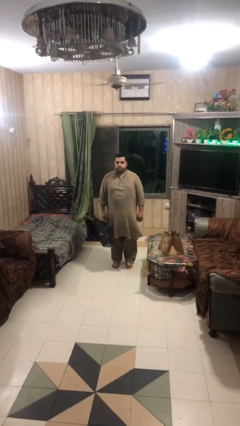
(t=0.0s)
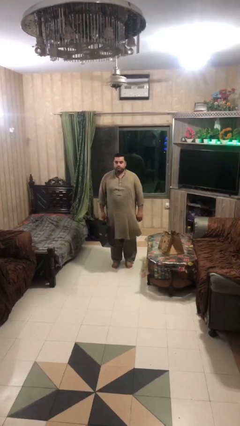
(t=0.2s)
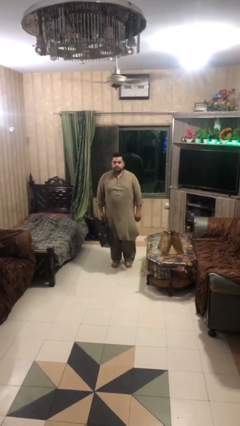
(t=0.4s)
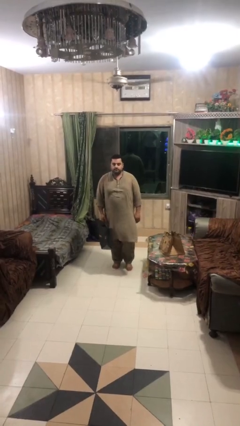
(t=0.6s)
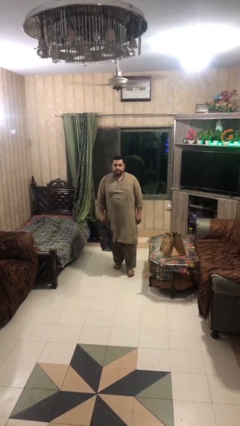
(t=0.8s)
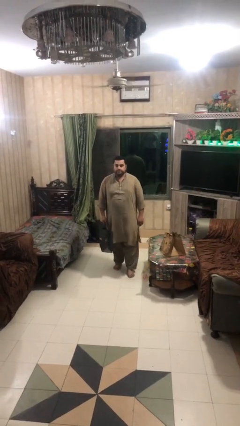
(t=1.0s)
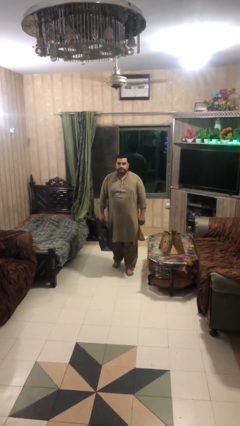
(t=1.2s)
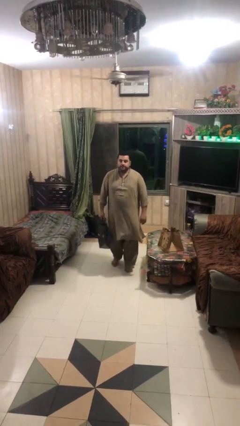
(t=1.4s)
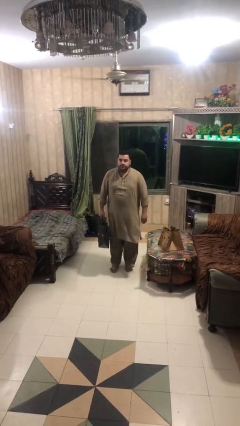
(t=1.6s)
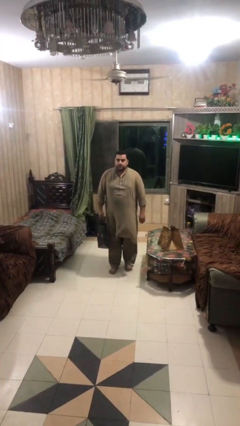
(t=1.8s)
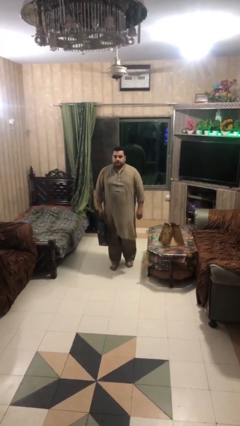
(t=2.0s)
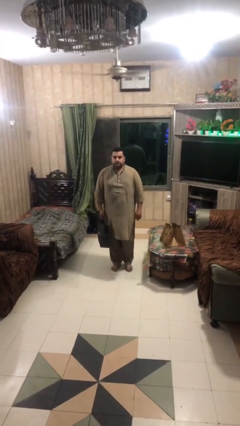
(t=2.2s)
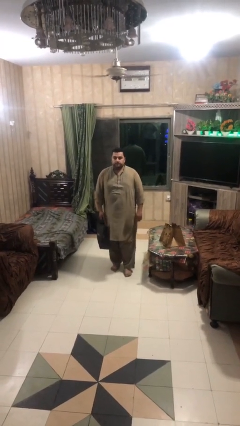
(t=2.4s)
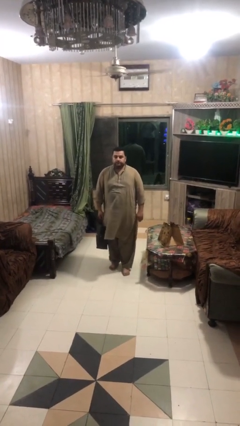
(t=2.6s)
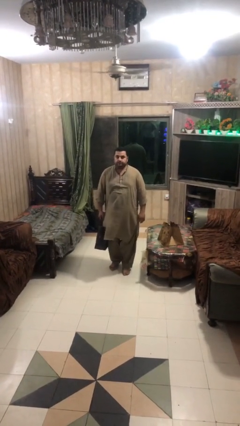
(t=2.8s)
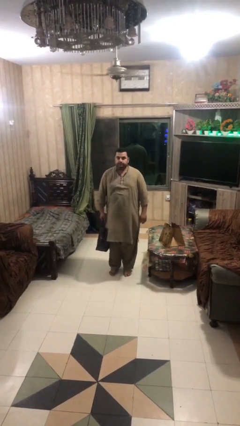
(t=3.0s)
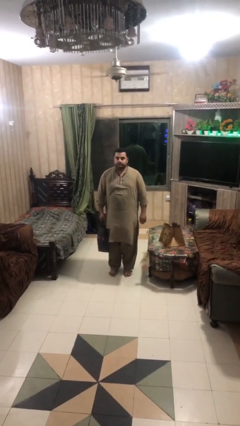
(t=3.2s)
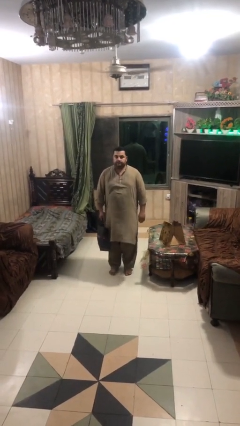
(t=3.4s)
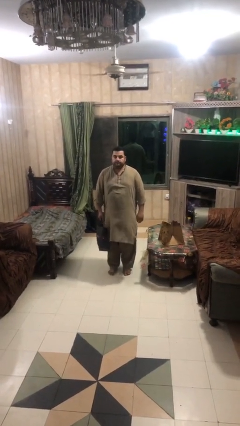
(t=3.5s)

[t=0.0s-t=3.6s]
person carries groceries

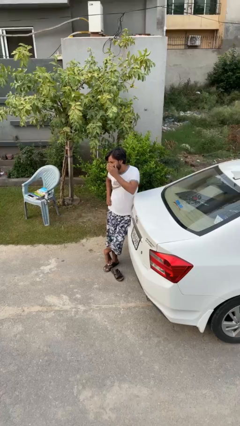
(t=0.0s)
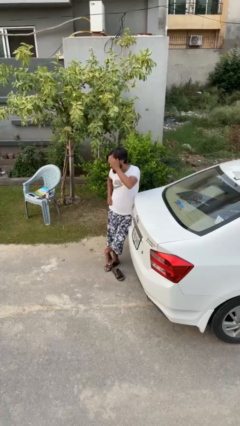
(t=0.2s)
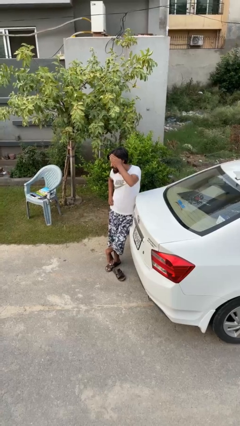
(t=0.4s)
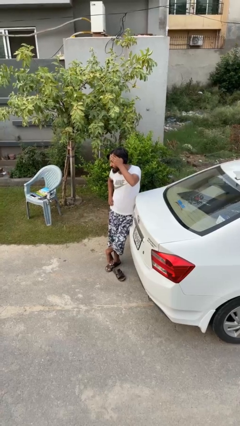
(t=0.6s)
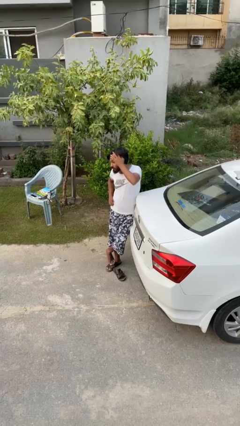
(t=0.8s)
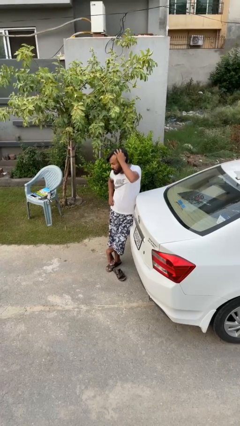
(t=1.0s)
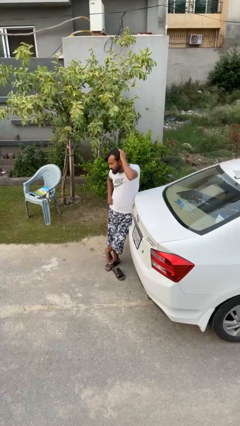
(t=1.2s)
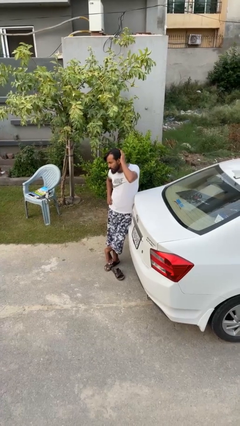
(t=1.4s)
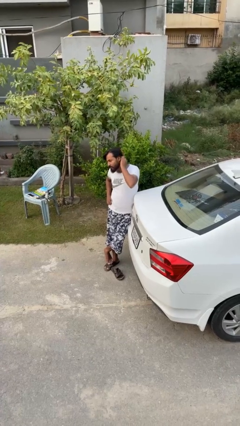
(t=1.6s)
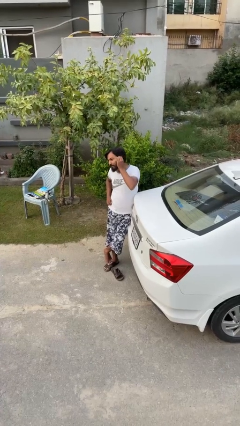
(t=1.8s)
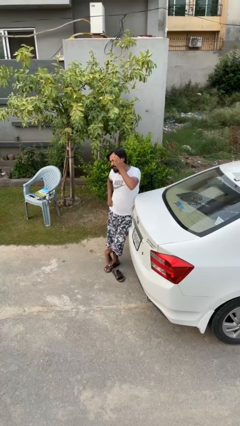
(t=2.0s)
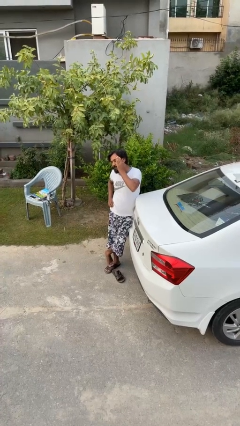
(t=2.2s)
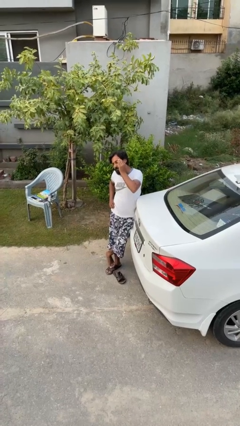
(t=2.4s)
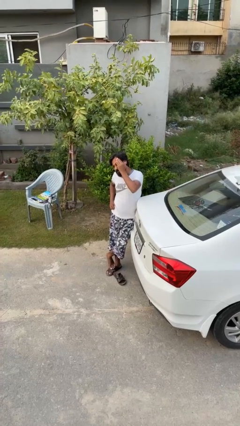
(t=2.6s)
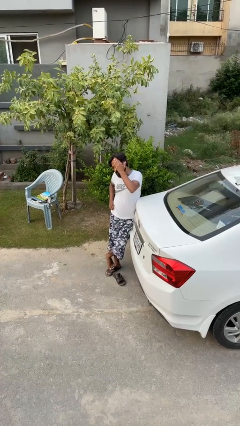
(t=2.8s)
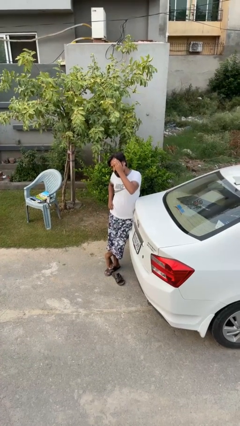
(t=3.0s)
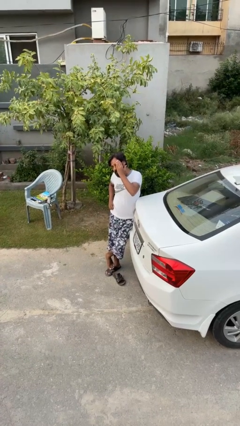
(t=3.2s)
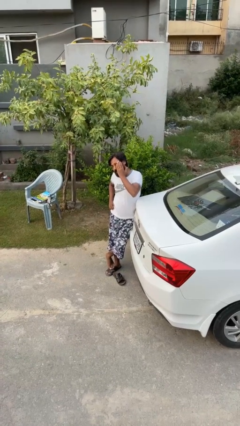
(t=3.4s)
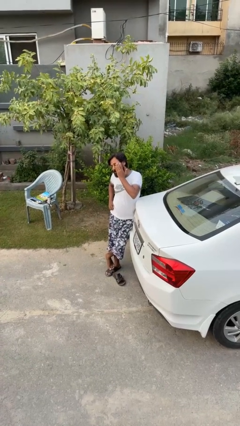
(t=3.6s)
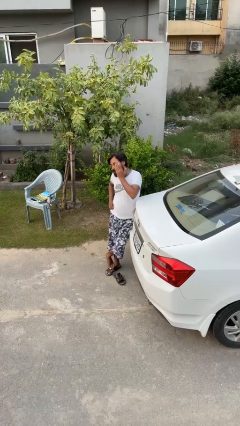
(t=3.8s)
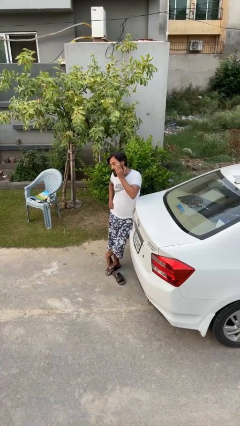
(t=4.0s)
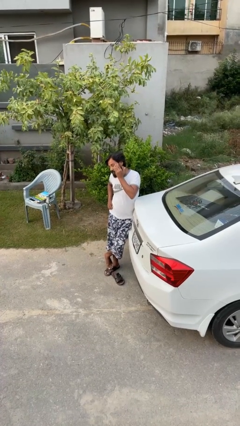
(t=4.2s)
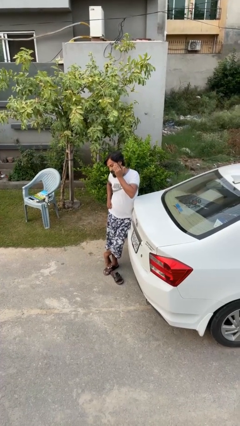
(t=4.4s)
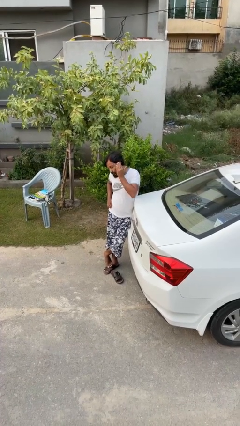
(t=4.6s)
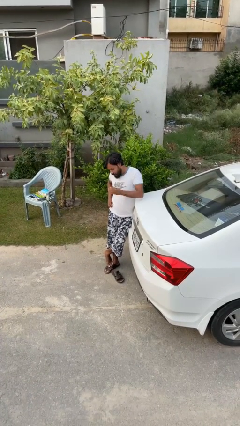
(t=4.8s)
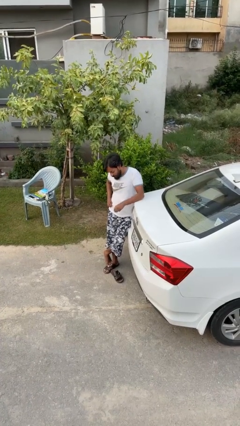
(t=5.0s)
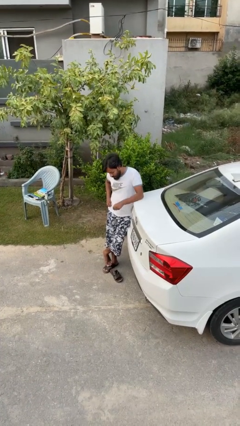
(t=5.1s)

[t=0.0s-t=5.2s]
person scratches face

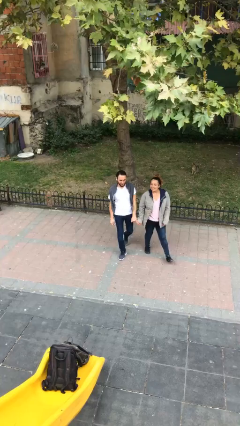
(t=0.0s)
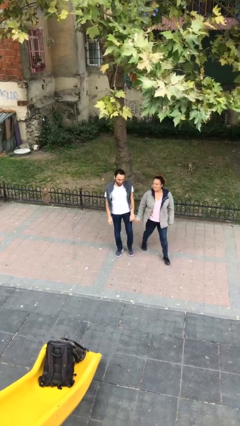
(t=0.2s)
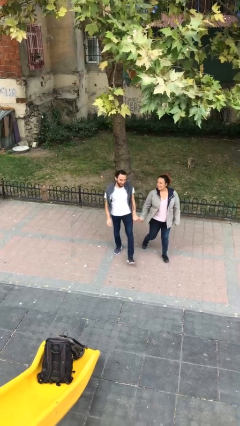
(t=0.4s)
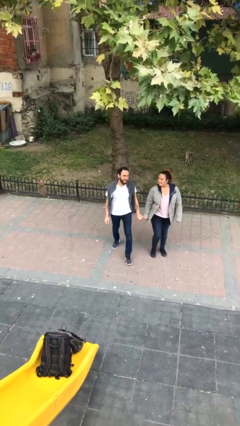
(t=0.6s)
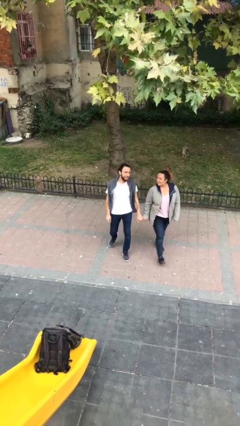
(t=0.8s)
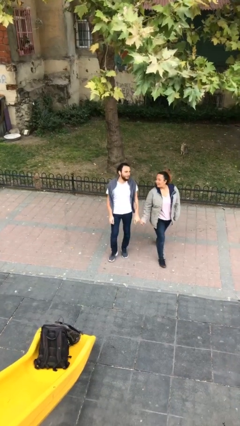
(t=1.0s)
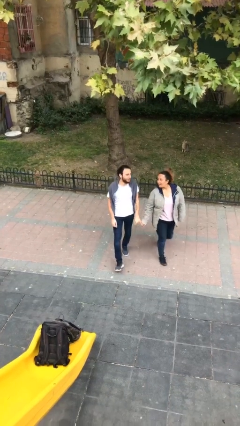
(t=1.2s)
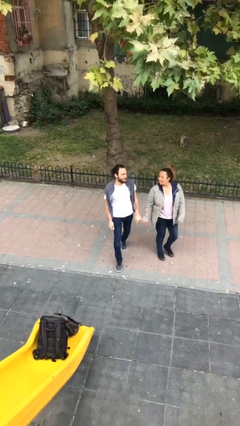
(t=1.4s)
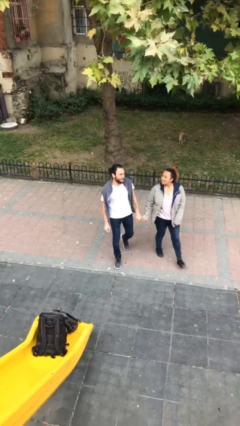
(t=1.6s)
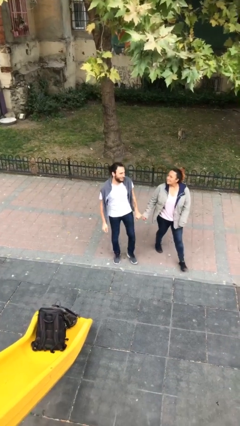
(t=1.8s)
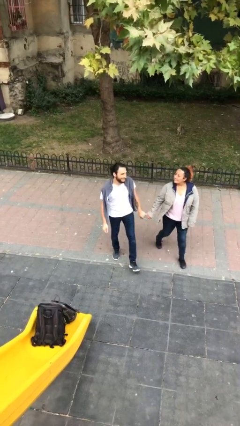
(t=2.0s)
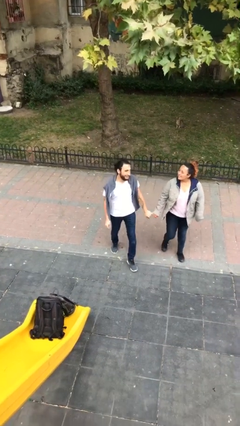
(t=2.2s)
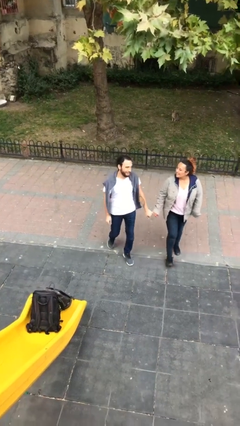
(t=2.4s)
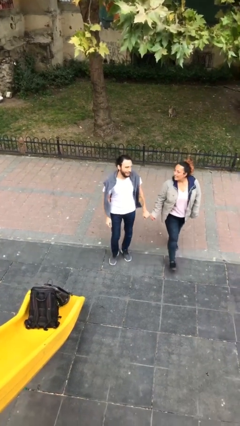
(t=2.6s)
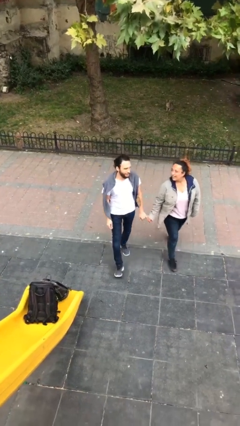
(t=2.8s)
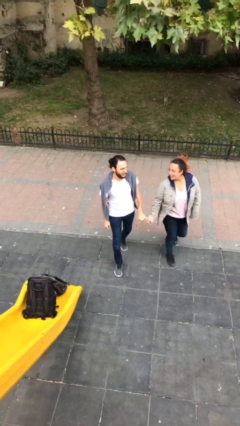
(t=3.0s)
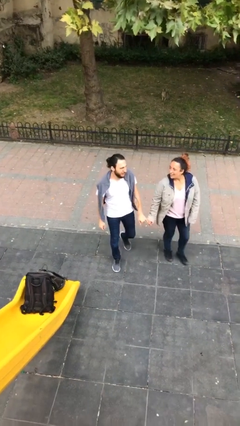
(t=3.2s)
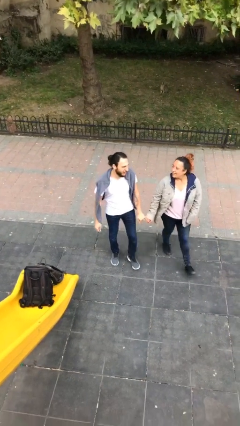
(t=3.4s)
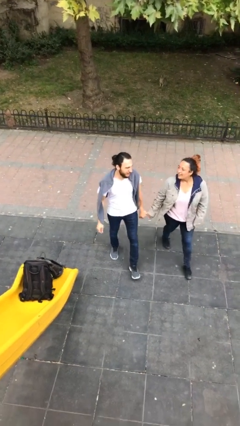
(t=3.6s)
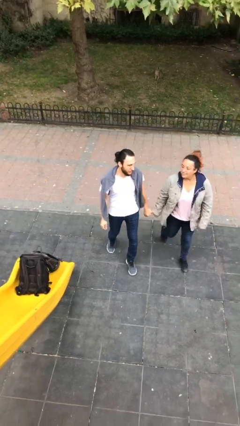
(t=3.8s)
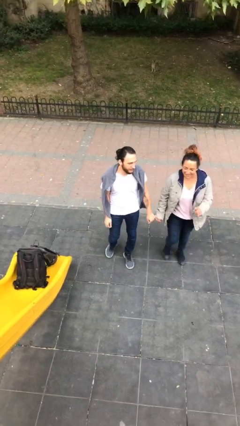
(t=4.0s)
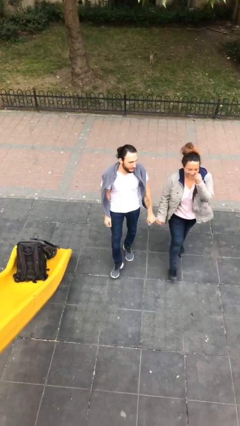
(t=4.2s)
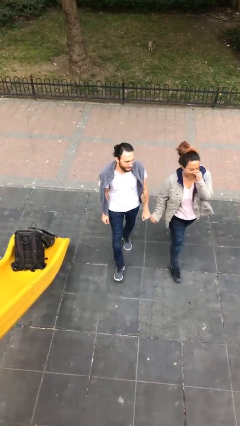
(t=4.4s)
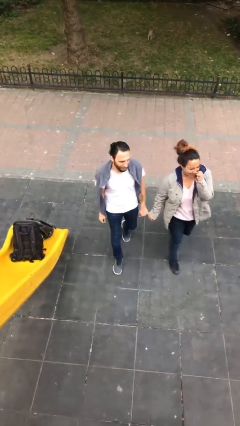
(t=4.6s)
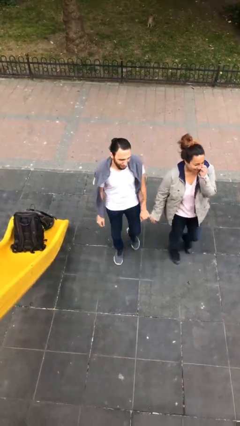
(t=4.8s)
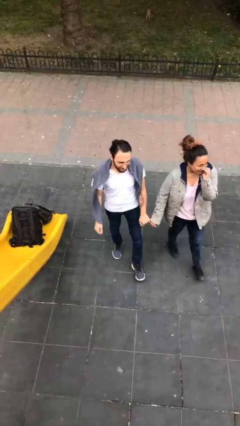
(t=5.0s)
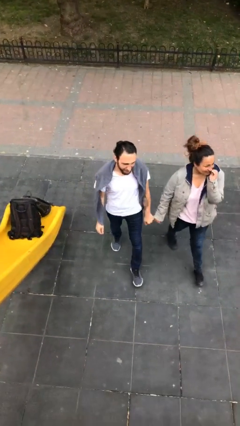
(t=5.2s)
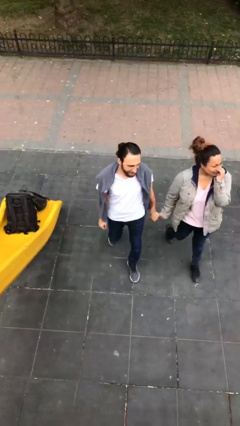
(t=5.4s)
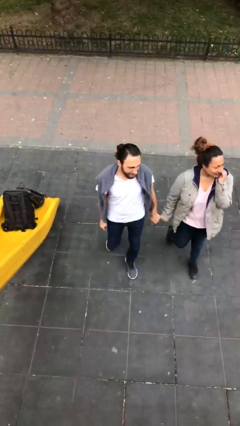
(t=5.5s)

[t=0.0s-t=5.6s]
person holds hand

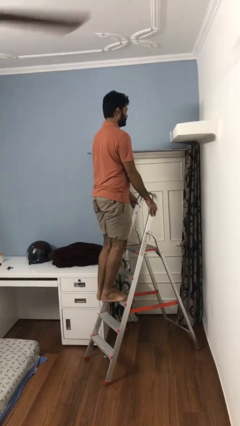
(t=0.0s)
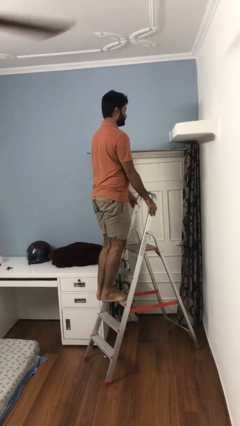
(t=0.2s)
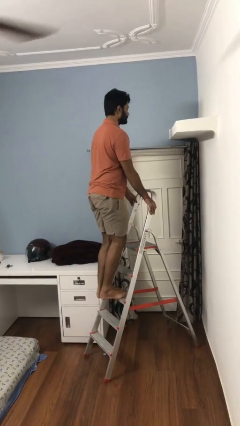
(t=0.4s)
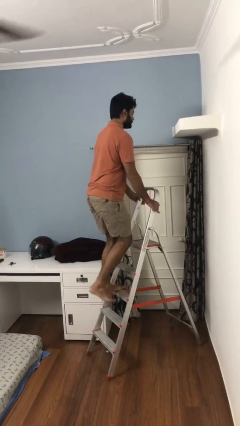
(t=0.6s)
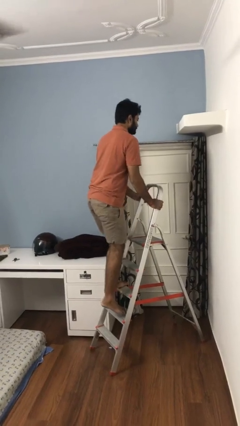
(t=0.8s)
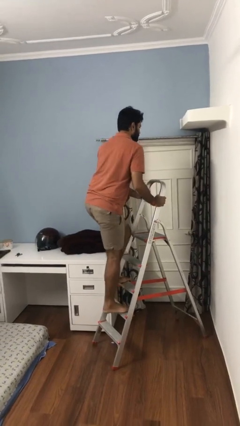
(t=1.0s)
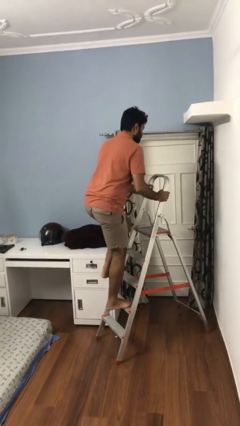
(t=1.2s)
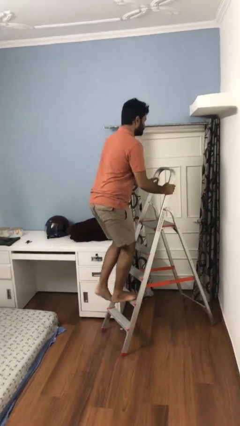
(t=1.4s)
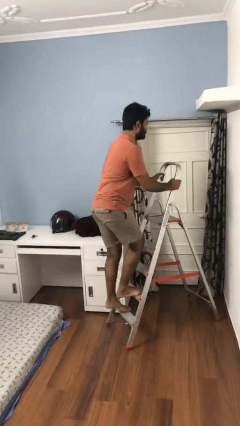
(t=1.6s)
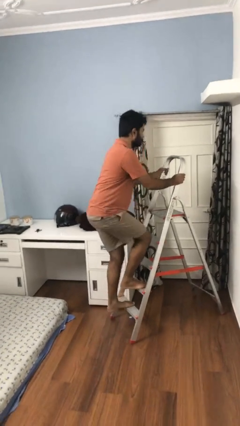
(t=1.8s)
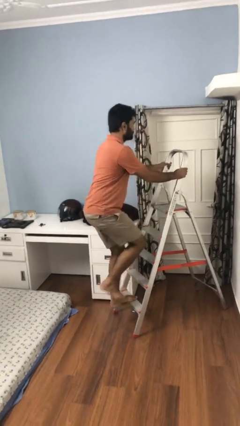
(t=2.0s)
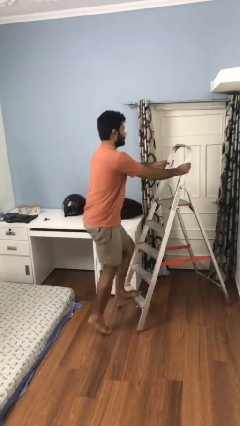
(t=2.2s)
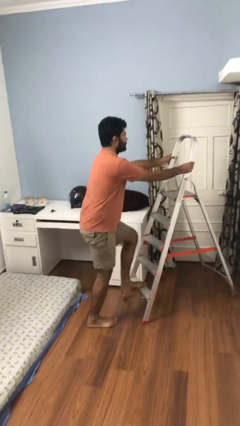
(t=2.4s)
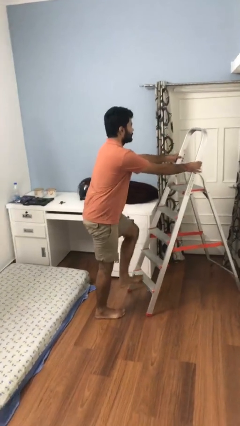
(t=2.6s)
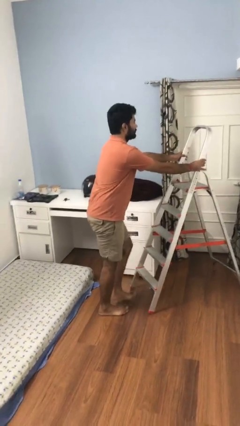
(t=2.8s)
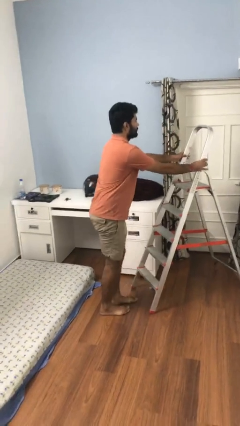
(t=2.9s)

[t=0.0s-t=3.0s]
person climbs down ladder
